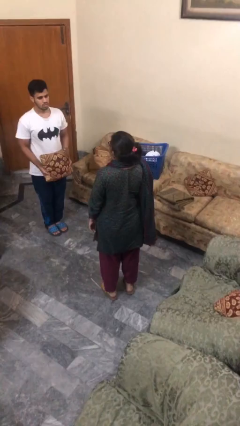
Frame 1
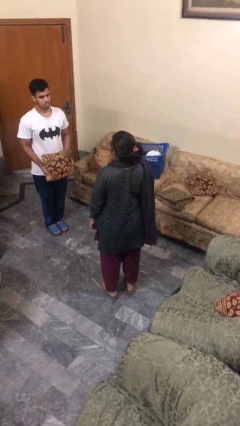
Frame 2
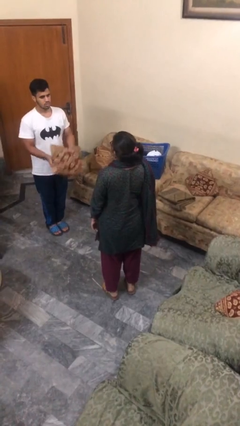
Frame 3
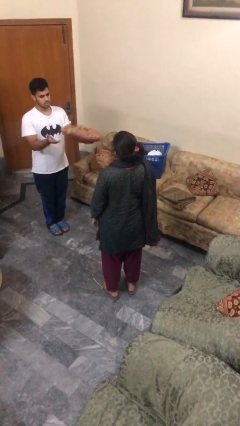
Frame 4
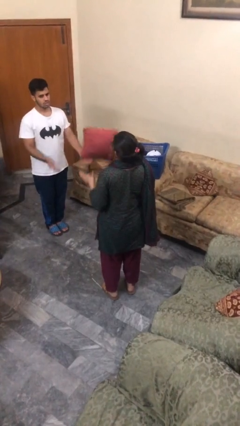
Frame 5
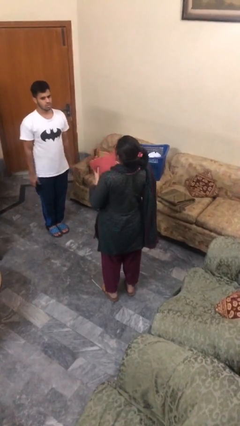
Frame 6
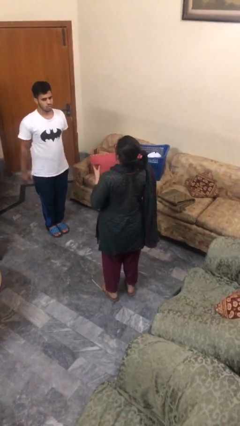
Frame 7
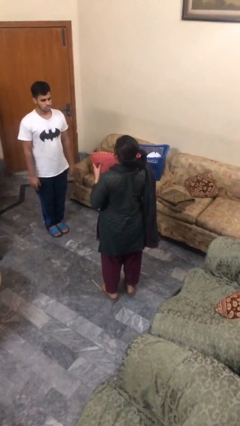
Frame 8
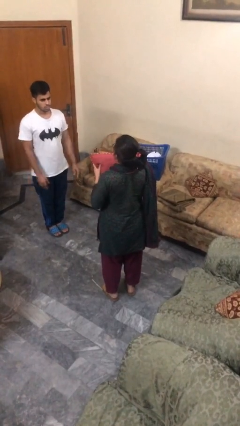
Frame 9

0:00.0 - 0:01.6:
person catches object from person

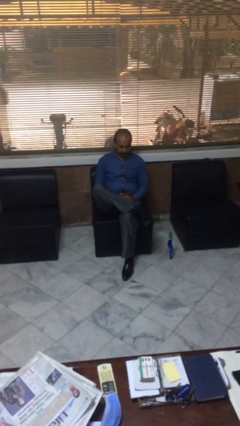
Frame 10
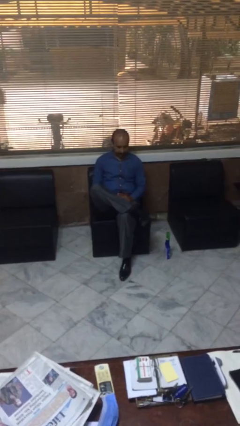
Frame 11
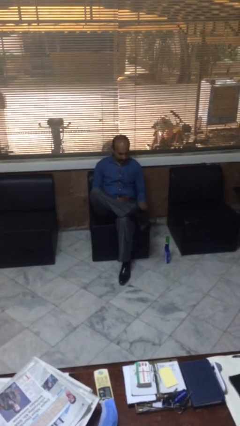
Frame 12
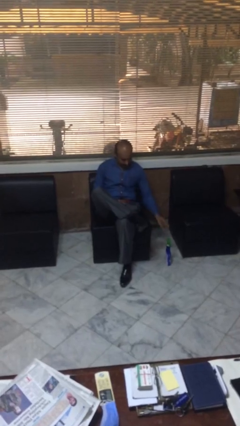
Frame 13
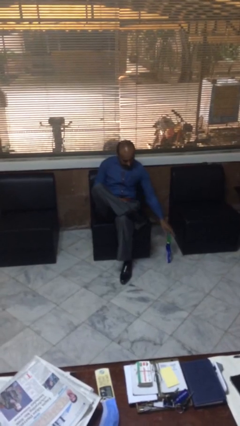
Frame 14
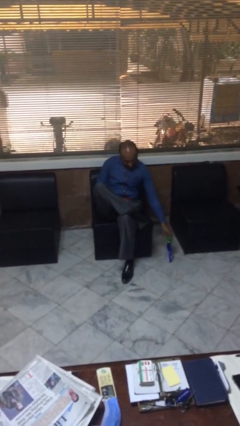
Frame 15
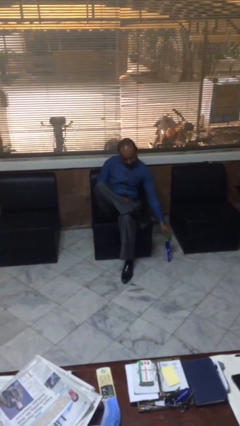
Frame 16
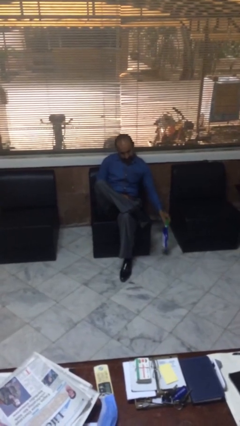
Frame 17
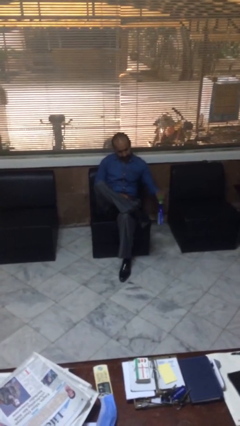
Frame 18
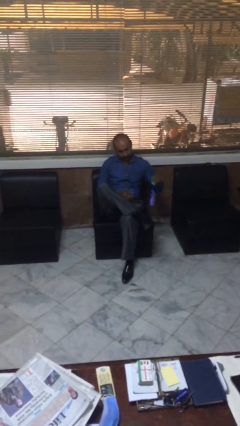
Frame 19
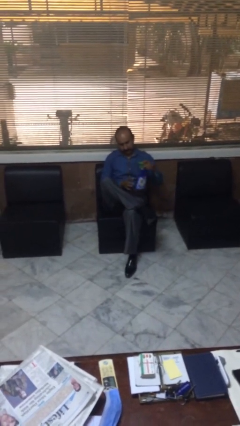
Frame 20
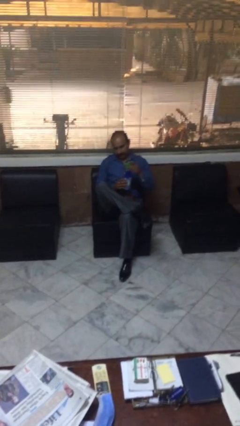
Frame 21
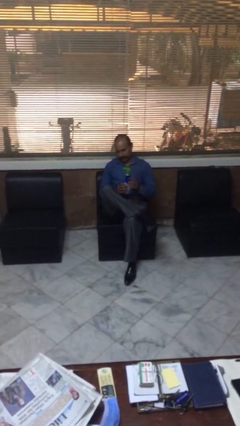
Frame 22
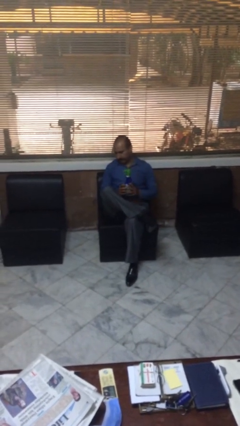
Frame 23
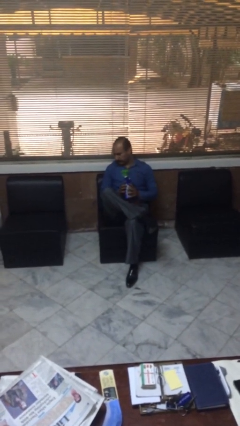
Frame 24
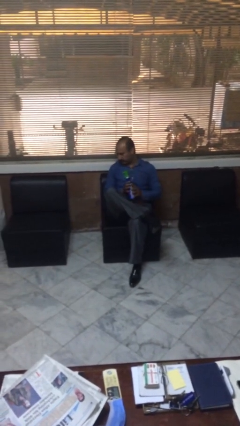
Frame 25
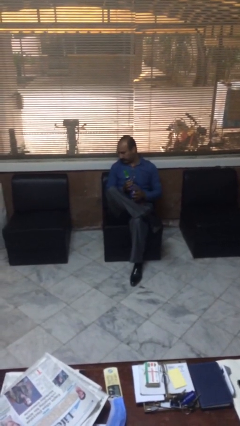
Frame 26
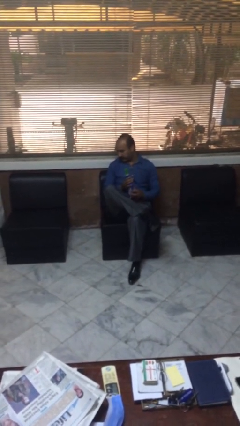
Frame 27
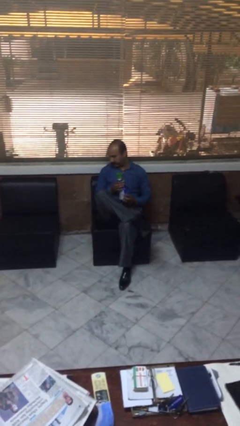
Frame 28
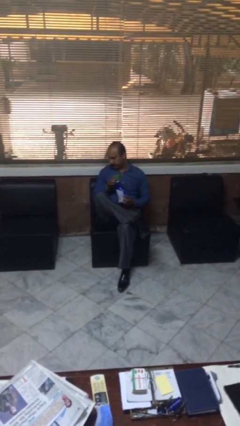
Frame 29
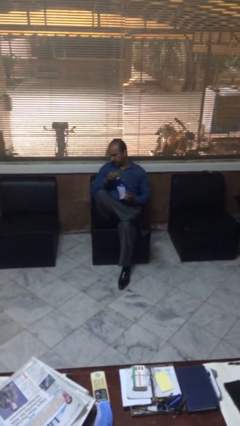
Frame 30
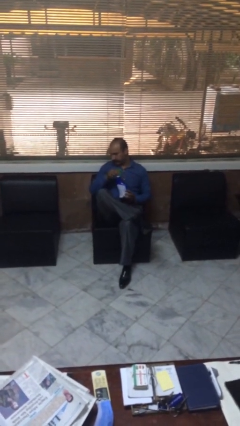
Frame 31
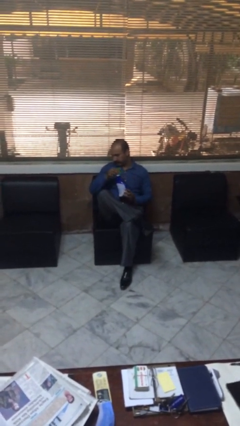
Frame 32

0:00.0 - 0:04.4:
person picks up object from floor

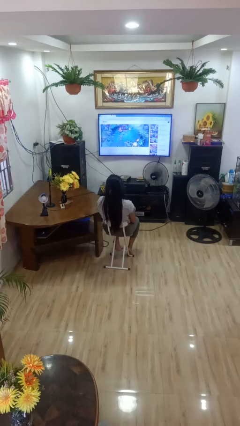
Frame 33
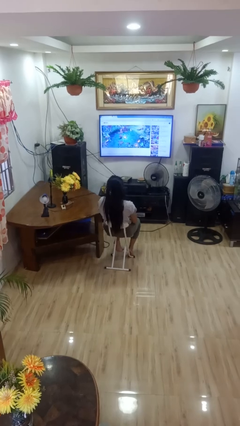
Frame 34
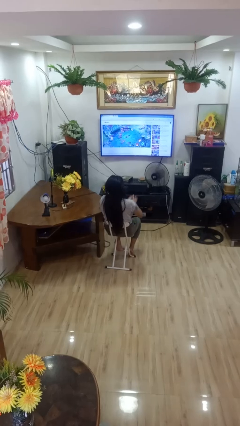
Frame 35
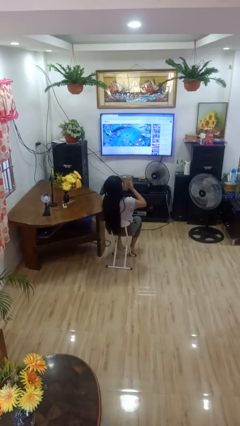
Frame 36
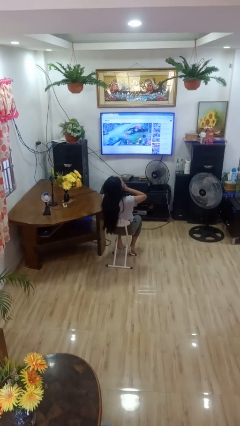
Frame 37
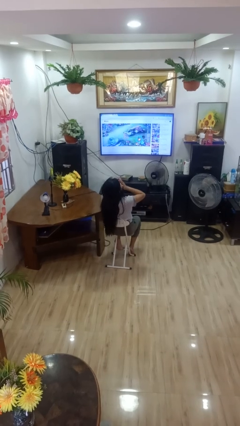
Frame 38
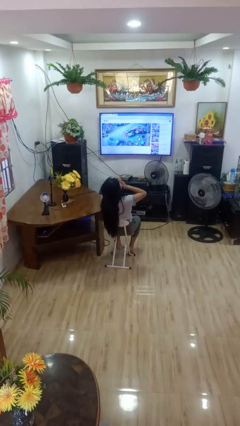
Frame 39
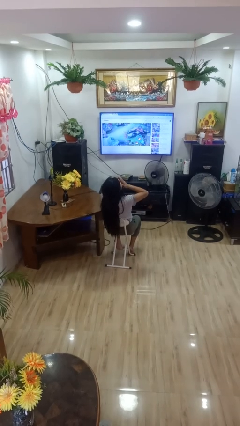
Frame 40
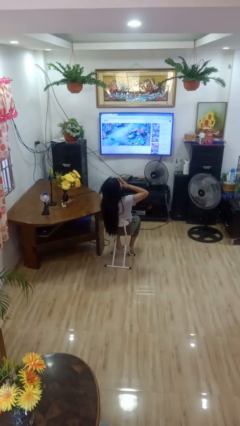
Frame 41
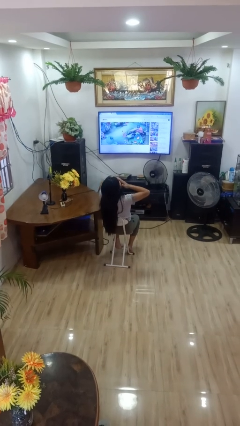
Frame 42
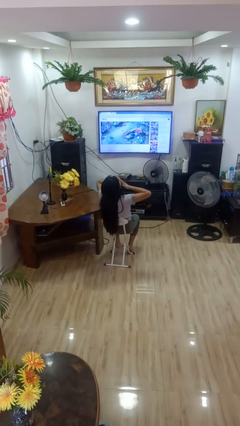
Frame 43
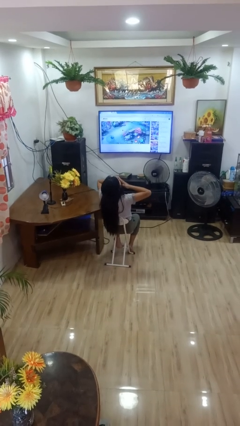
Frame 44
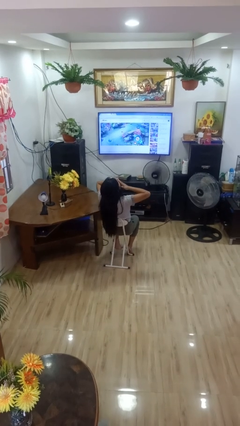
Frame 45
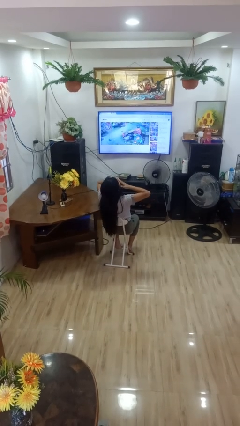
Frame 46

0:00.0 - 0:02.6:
person yawns

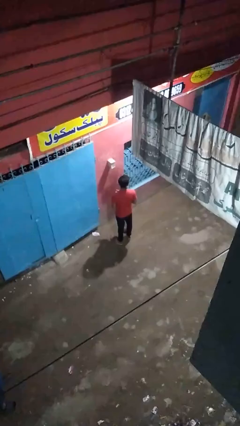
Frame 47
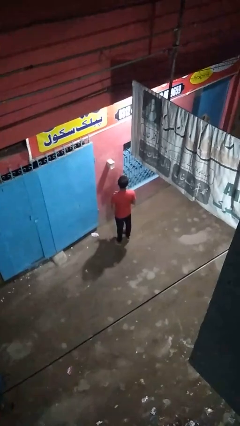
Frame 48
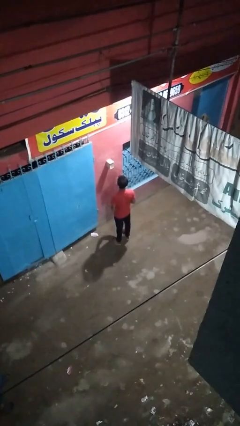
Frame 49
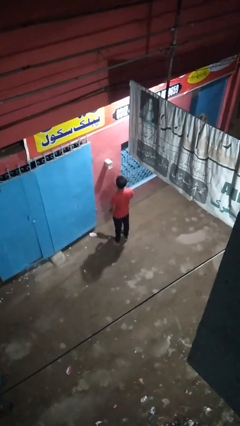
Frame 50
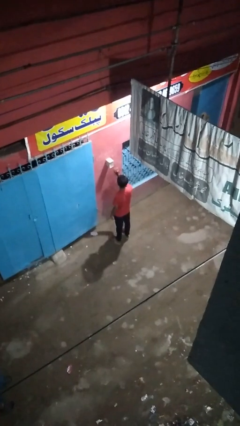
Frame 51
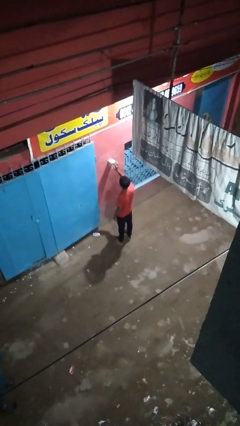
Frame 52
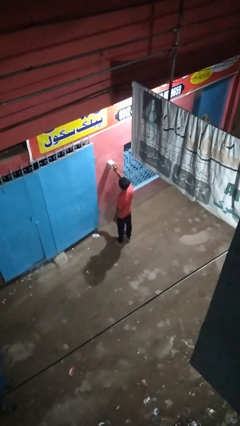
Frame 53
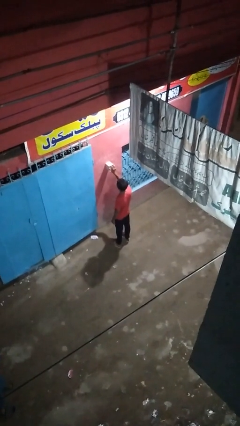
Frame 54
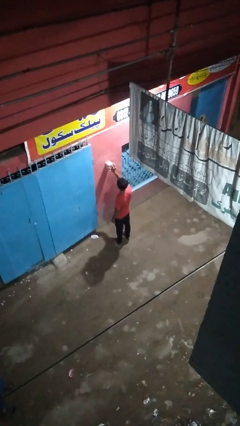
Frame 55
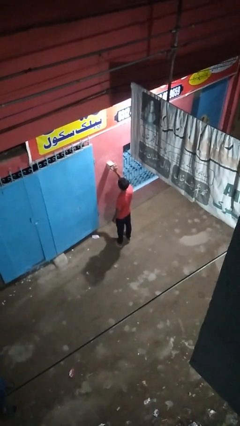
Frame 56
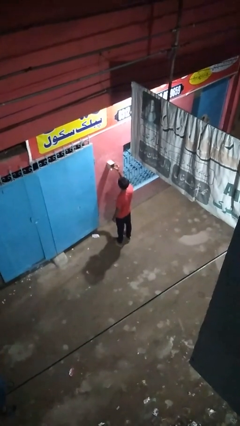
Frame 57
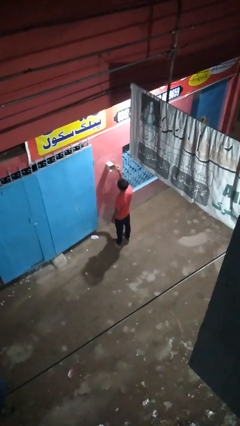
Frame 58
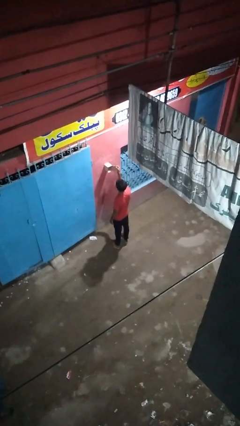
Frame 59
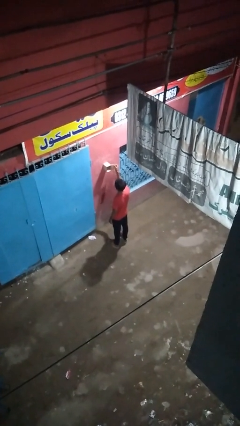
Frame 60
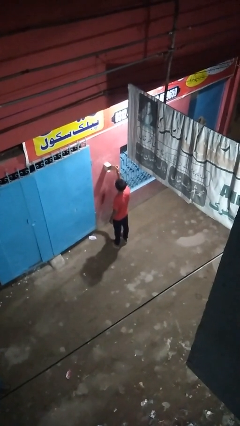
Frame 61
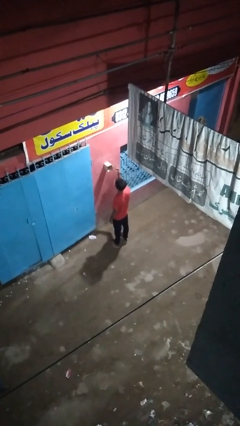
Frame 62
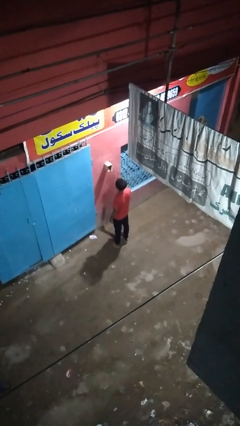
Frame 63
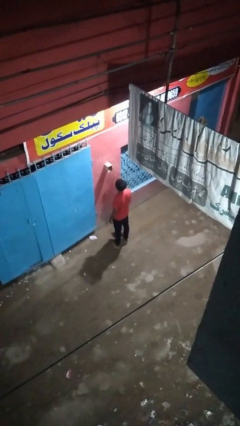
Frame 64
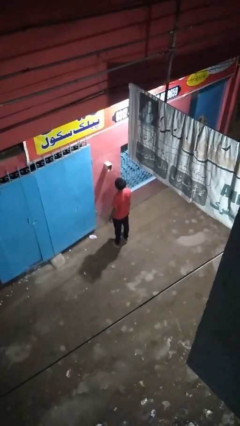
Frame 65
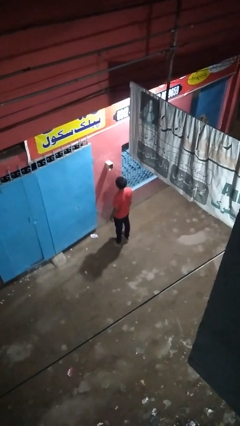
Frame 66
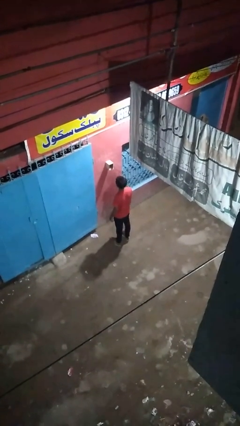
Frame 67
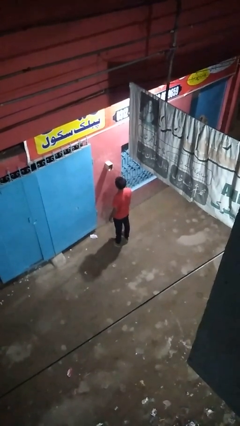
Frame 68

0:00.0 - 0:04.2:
person opens mailbox

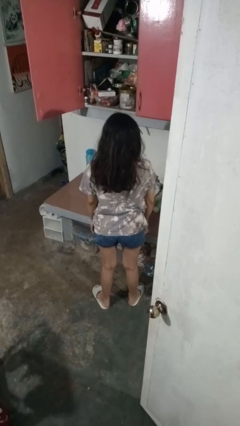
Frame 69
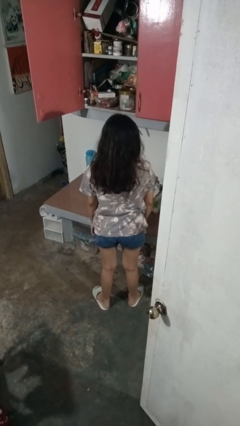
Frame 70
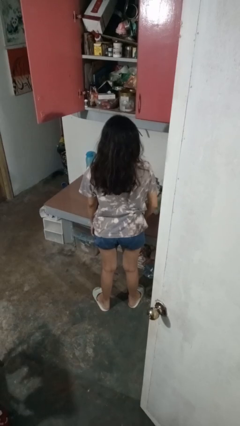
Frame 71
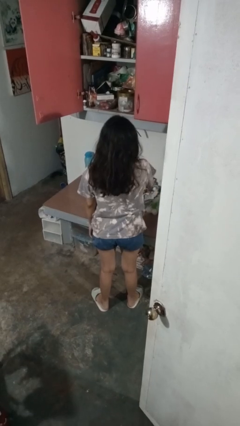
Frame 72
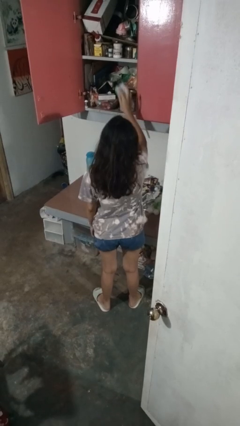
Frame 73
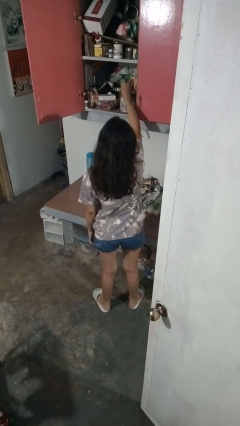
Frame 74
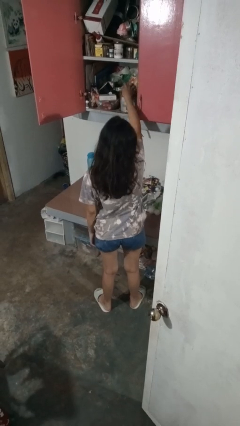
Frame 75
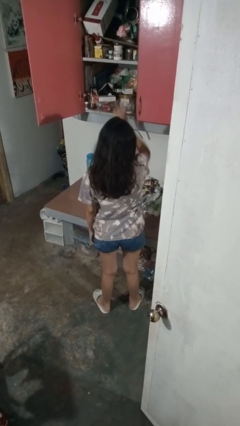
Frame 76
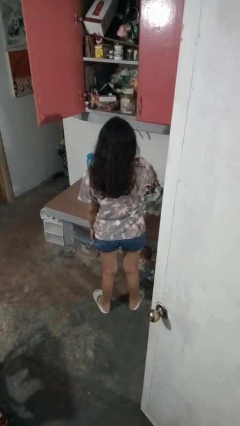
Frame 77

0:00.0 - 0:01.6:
person puts object in cabinet

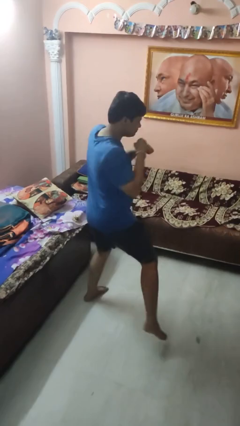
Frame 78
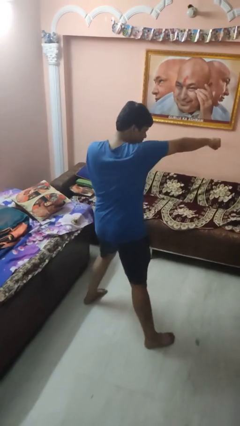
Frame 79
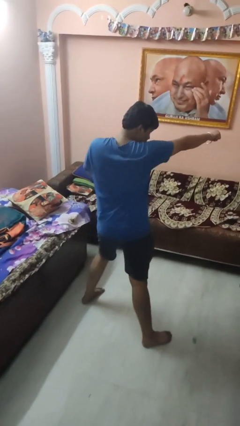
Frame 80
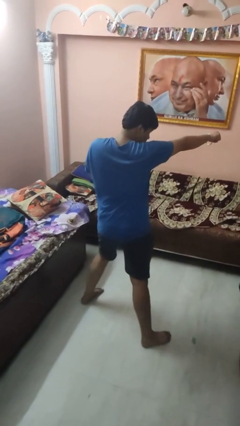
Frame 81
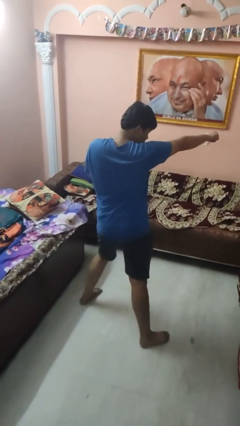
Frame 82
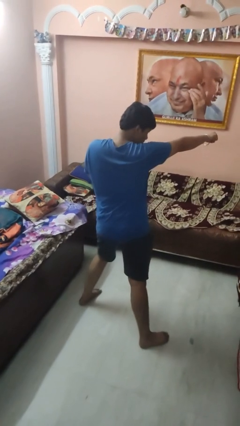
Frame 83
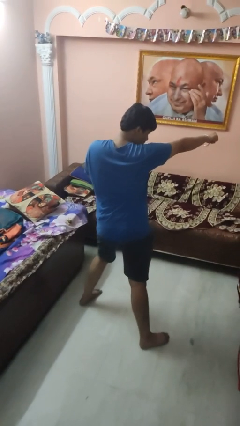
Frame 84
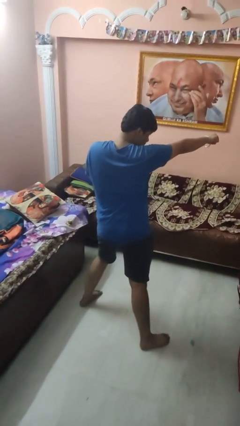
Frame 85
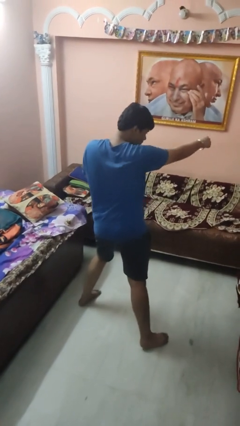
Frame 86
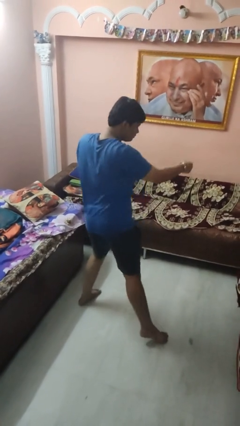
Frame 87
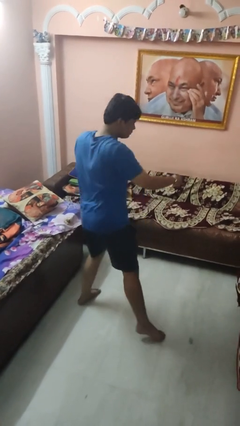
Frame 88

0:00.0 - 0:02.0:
person punches

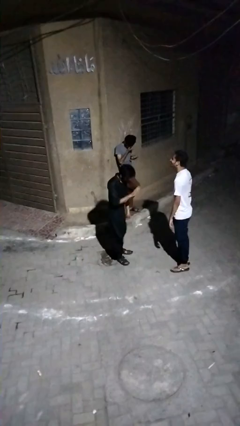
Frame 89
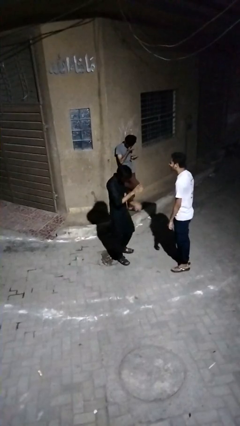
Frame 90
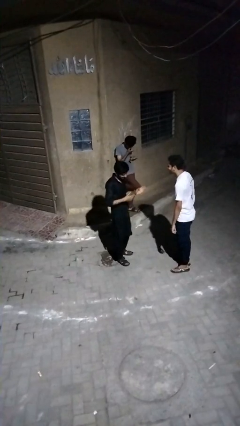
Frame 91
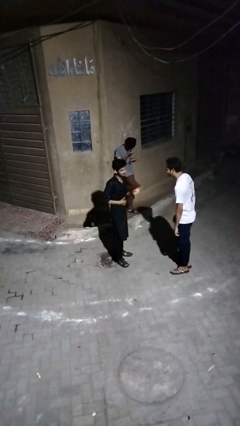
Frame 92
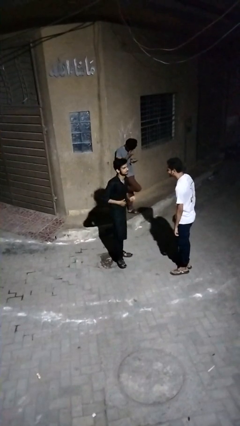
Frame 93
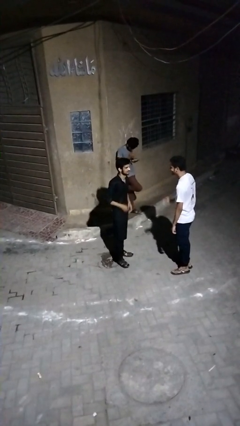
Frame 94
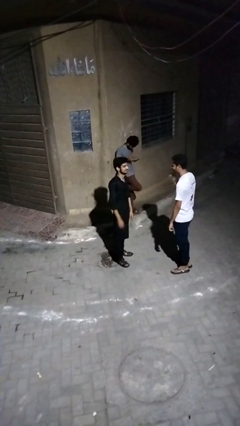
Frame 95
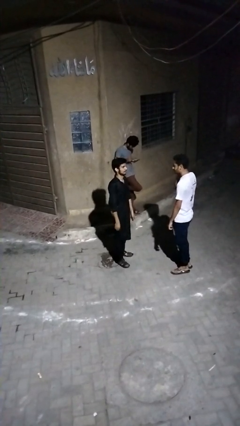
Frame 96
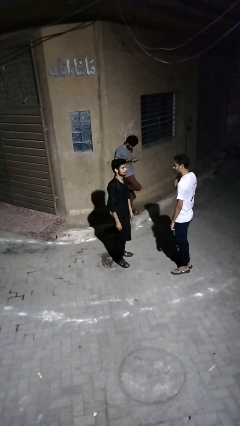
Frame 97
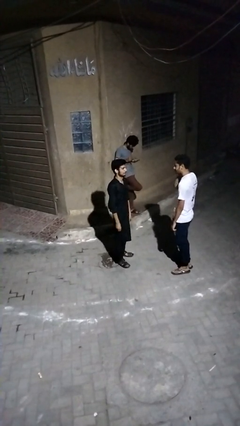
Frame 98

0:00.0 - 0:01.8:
person laughs with person
